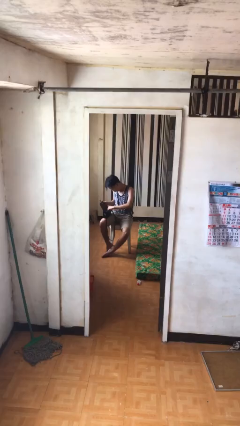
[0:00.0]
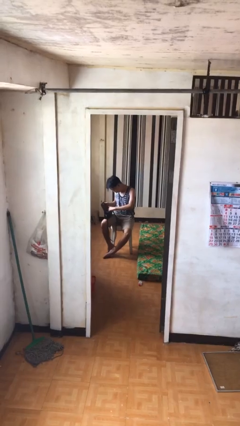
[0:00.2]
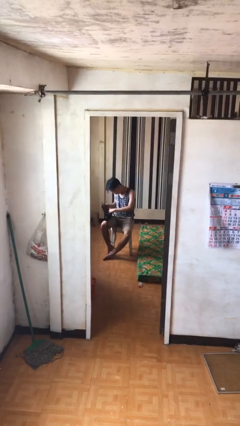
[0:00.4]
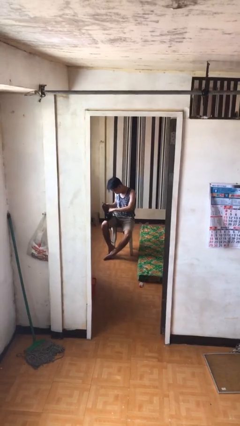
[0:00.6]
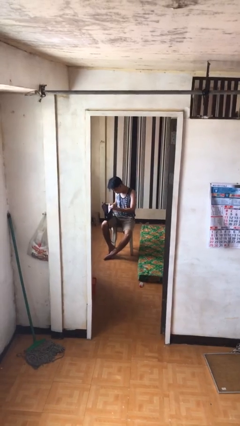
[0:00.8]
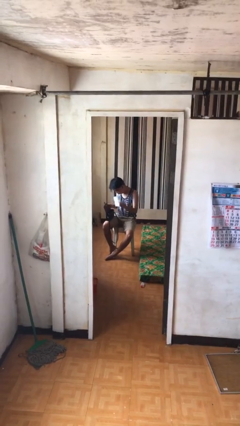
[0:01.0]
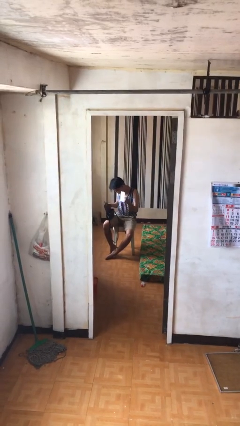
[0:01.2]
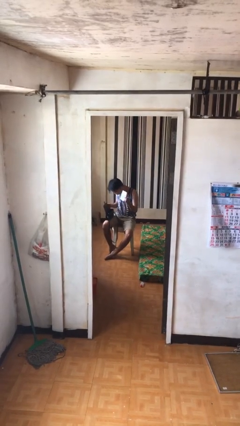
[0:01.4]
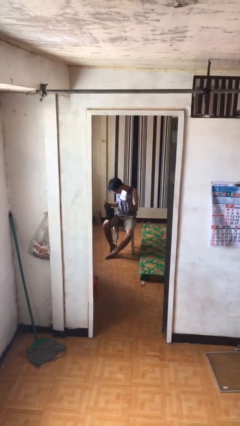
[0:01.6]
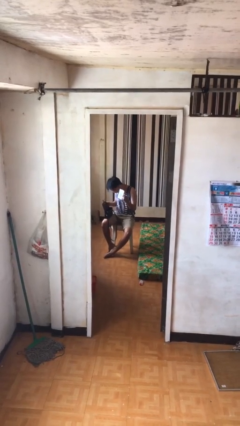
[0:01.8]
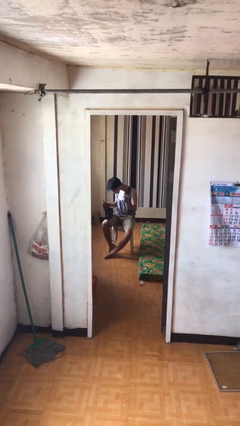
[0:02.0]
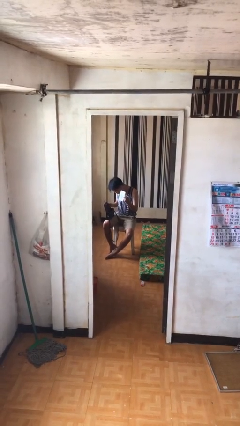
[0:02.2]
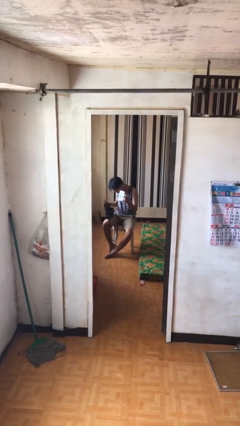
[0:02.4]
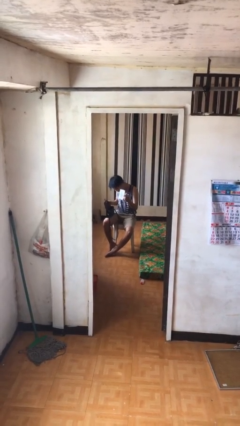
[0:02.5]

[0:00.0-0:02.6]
person takes object from purse

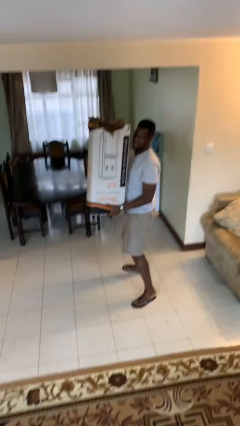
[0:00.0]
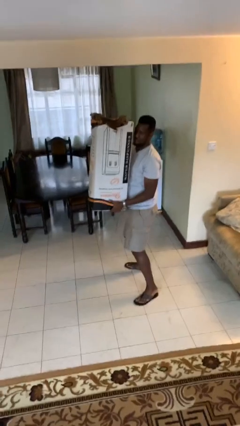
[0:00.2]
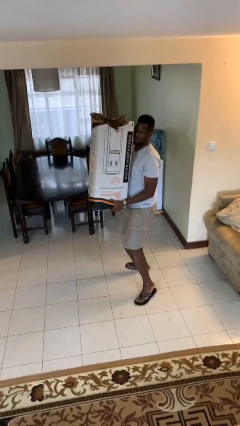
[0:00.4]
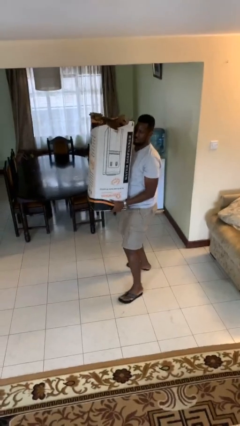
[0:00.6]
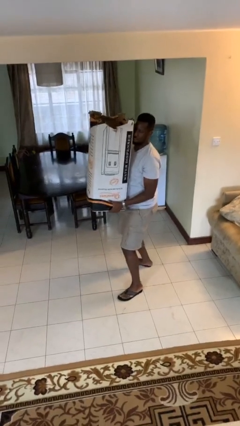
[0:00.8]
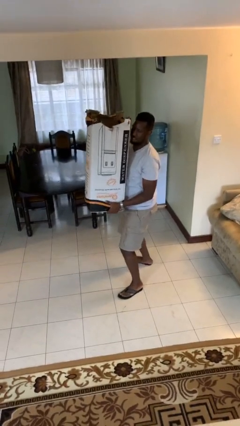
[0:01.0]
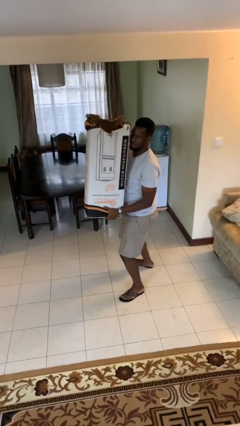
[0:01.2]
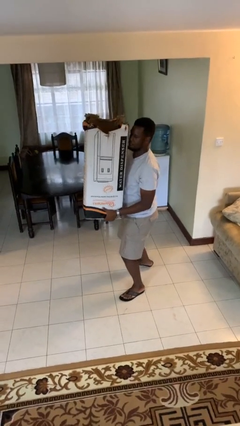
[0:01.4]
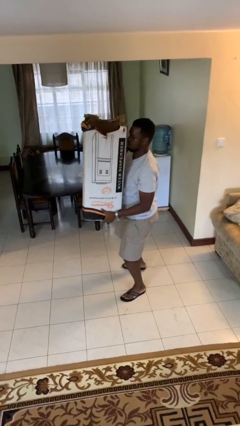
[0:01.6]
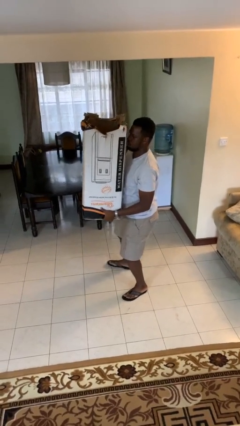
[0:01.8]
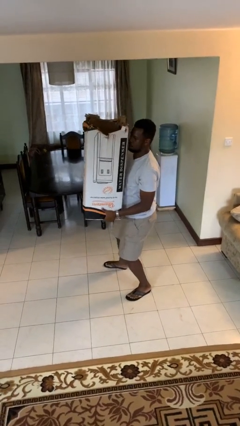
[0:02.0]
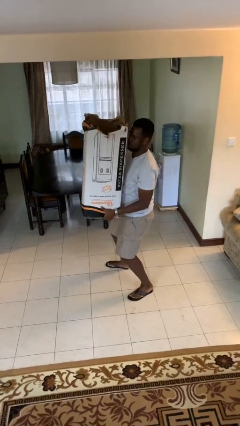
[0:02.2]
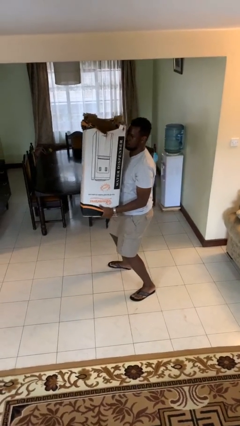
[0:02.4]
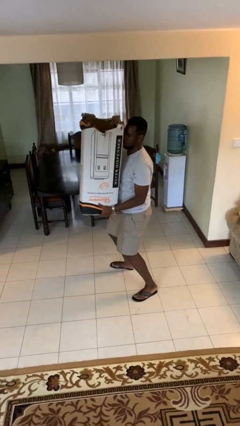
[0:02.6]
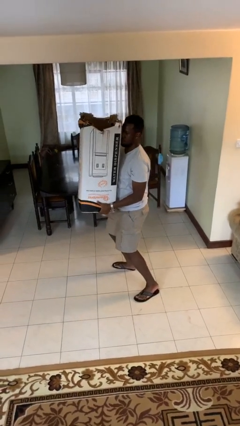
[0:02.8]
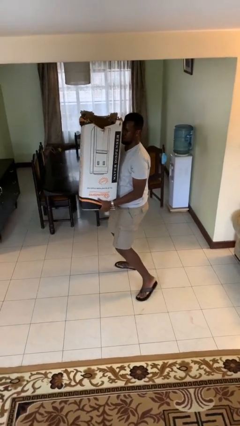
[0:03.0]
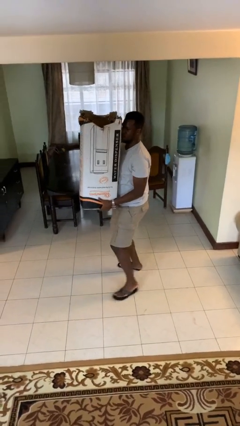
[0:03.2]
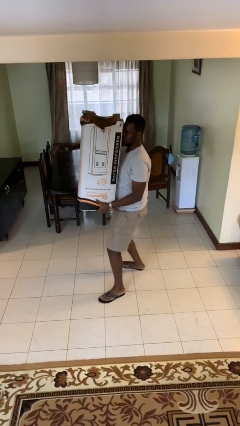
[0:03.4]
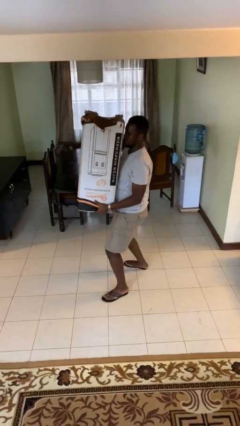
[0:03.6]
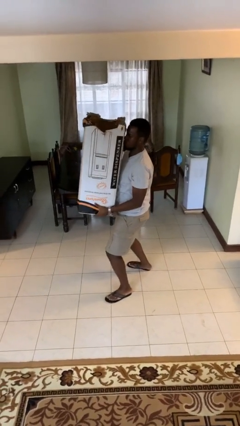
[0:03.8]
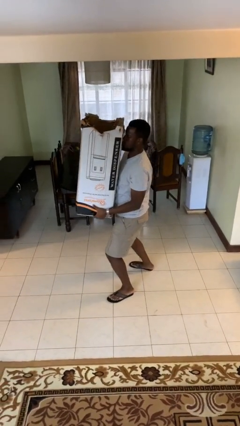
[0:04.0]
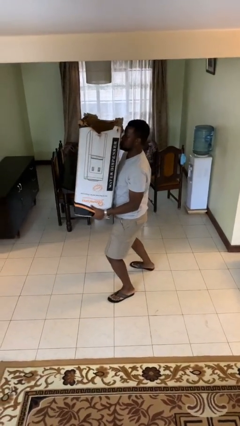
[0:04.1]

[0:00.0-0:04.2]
person carries heavy object

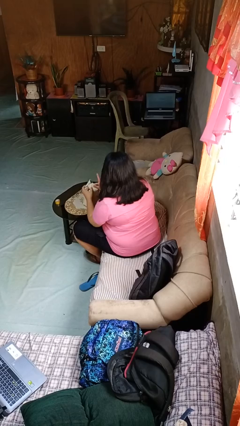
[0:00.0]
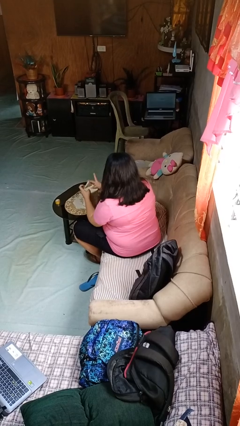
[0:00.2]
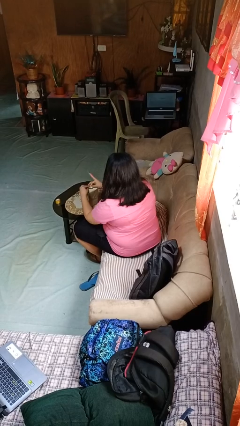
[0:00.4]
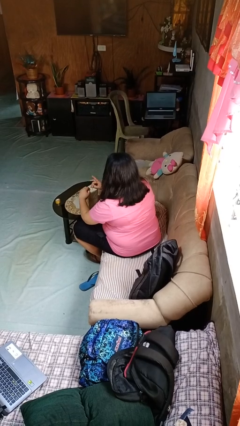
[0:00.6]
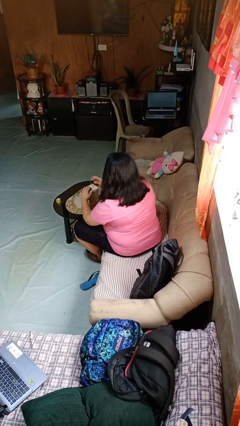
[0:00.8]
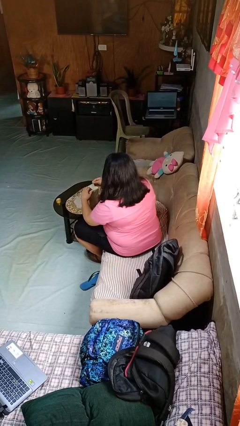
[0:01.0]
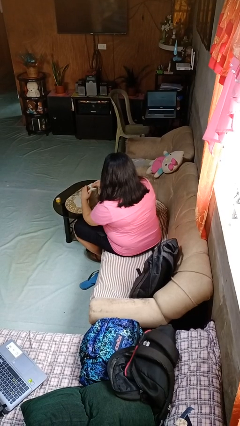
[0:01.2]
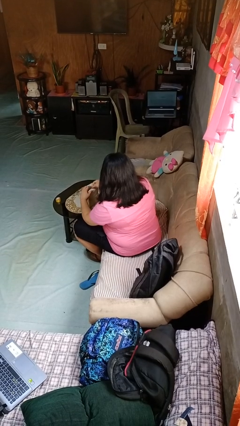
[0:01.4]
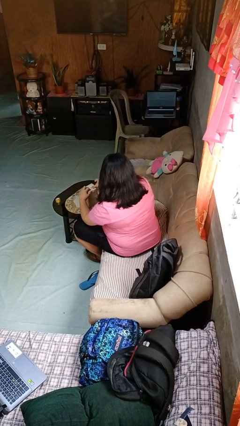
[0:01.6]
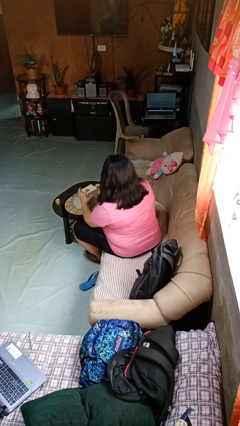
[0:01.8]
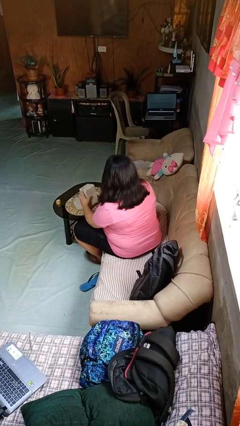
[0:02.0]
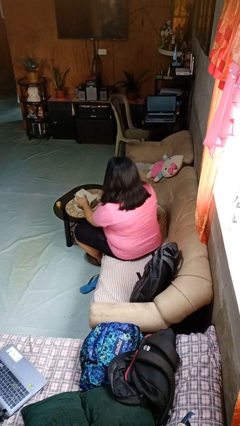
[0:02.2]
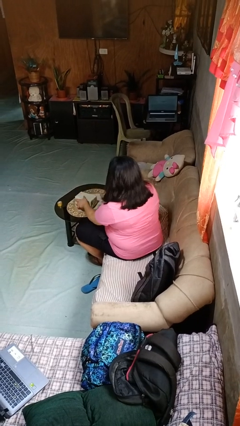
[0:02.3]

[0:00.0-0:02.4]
person wraps box

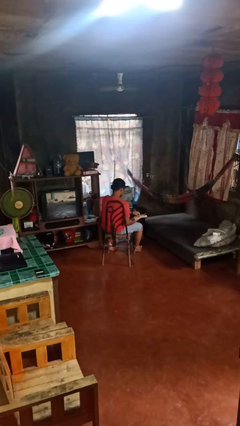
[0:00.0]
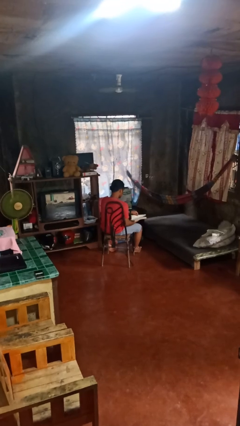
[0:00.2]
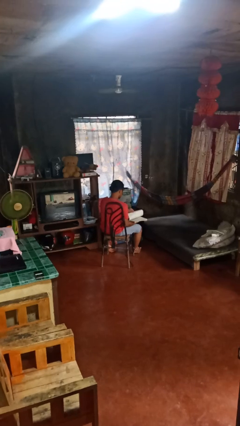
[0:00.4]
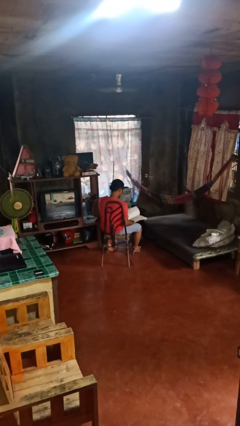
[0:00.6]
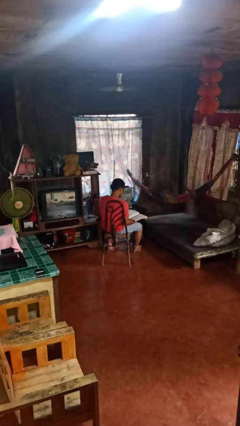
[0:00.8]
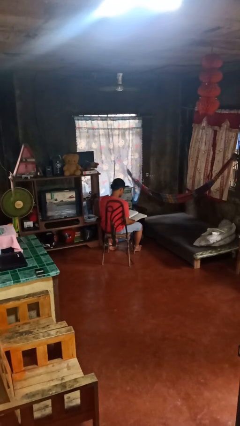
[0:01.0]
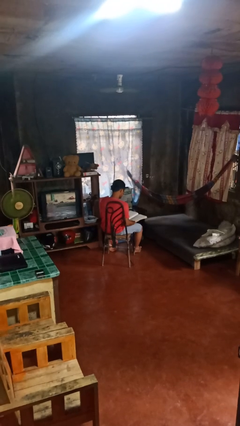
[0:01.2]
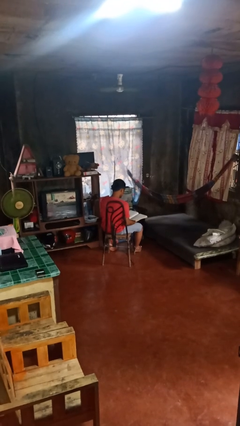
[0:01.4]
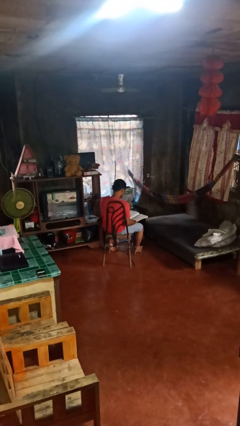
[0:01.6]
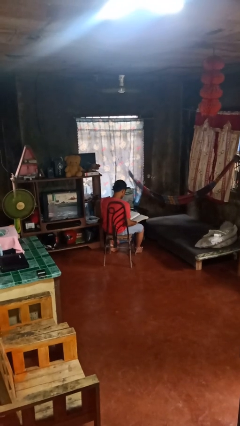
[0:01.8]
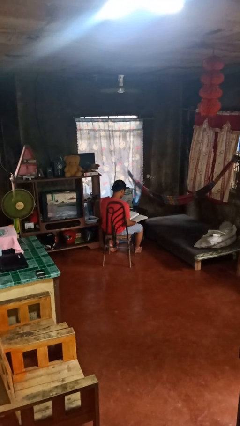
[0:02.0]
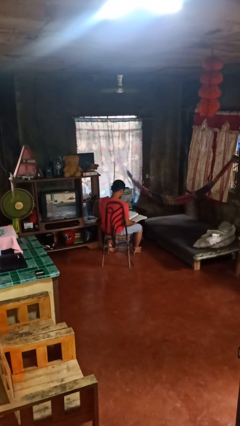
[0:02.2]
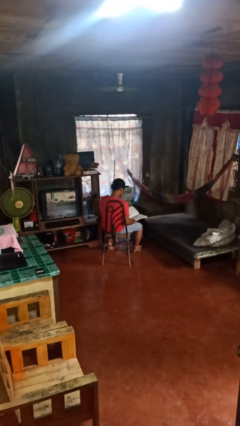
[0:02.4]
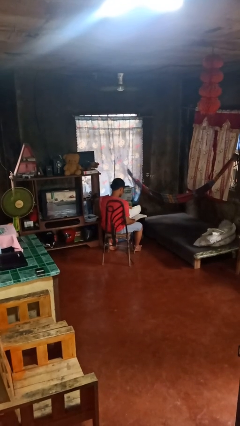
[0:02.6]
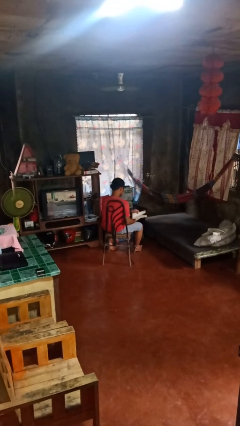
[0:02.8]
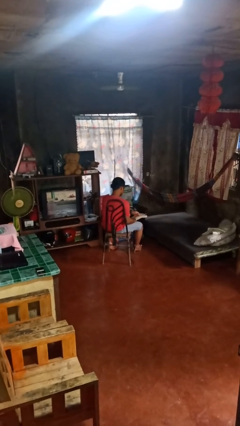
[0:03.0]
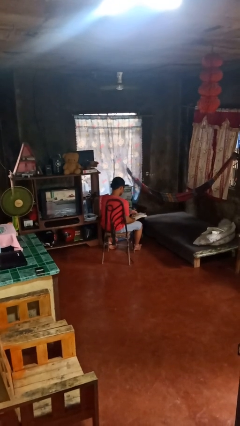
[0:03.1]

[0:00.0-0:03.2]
person reads book

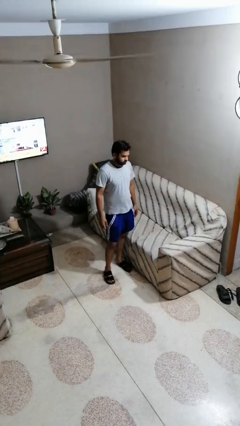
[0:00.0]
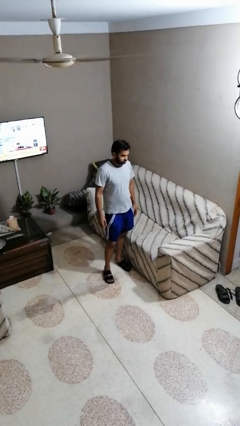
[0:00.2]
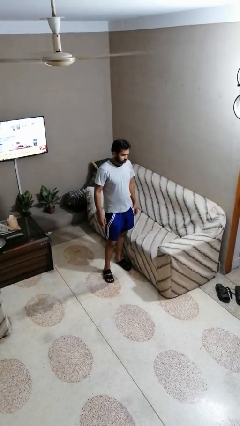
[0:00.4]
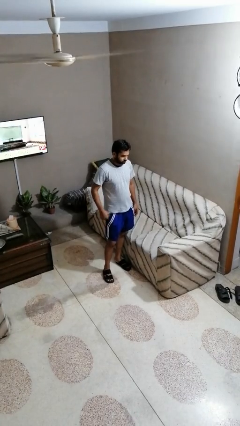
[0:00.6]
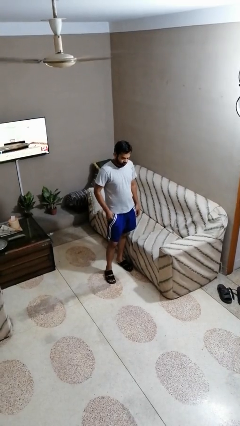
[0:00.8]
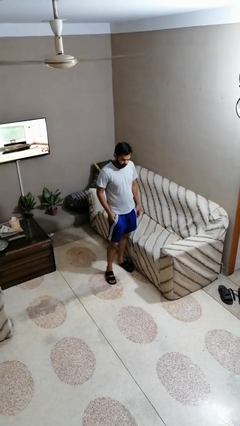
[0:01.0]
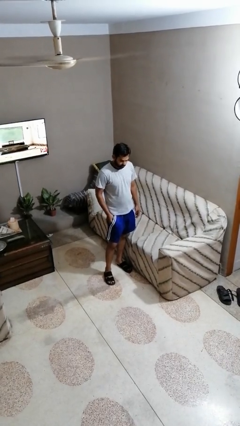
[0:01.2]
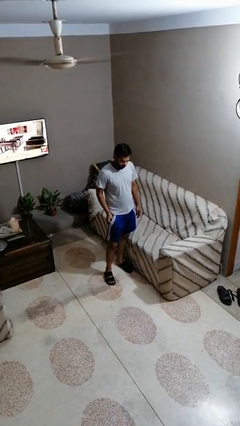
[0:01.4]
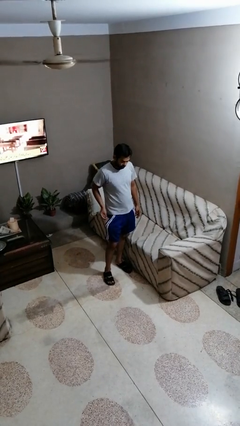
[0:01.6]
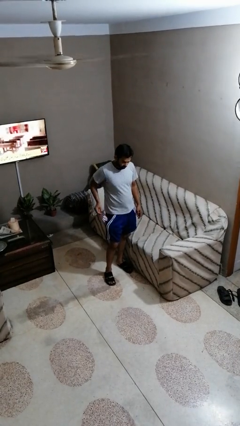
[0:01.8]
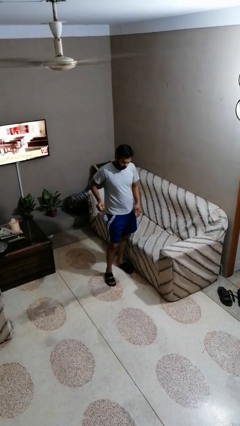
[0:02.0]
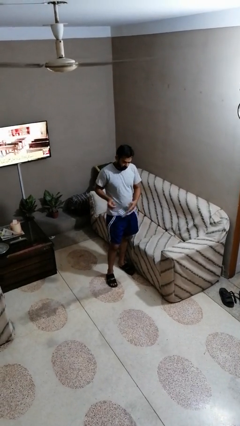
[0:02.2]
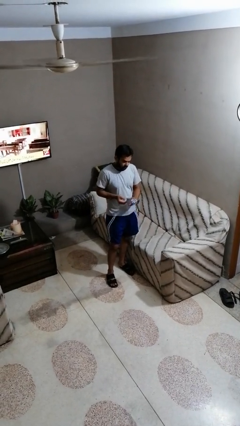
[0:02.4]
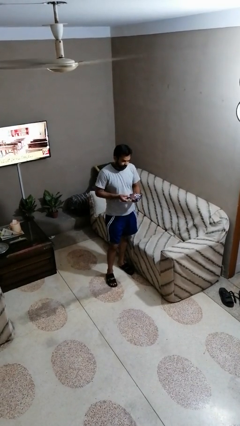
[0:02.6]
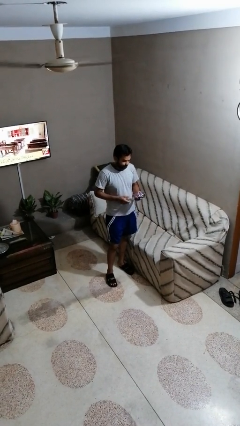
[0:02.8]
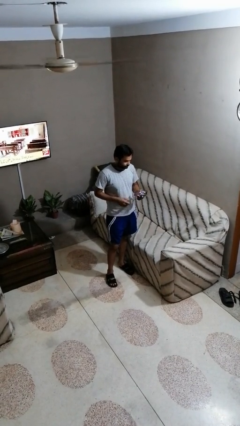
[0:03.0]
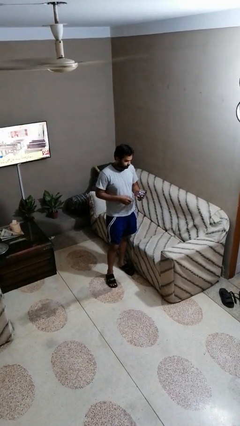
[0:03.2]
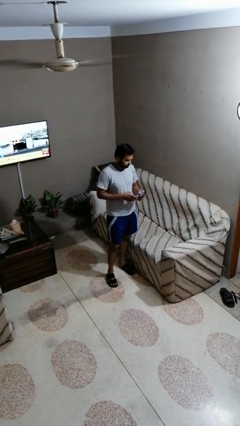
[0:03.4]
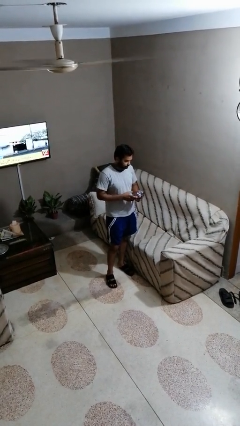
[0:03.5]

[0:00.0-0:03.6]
person takes phone from pocket

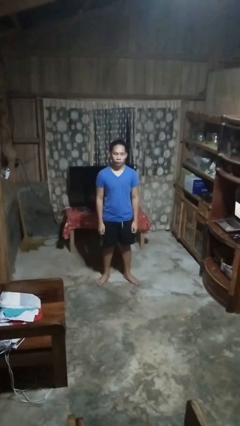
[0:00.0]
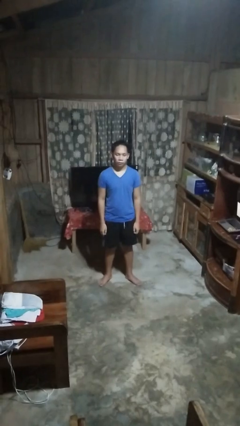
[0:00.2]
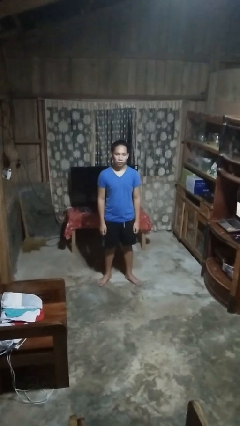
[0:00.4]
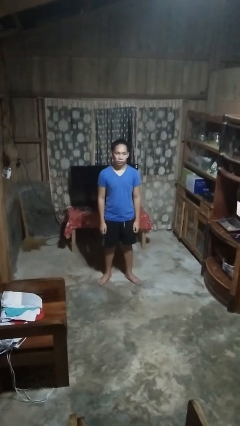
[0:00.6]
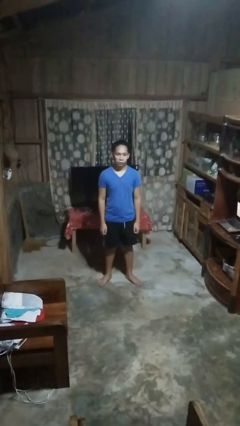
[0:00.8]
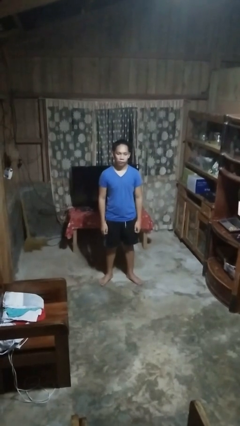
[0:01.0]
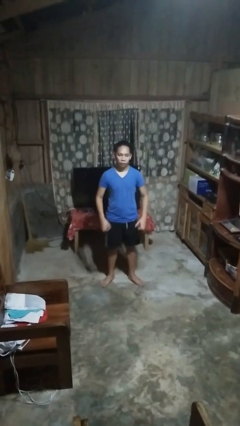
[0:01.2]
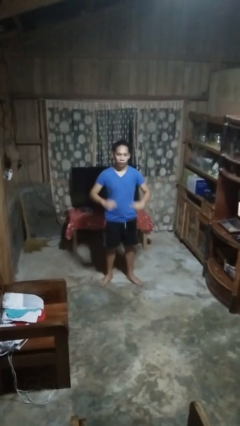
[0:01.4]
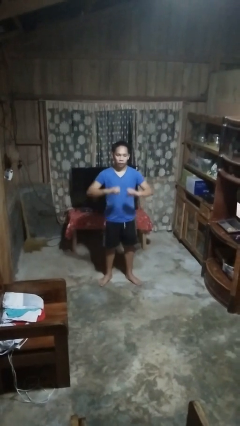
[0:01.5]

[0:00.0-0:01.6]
person gestures heart
